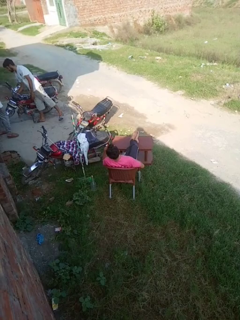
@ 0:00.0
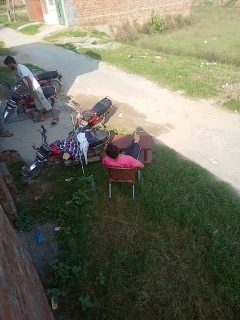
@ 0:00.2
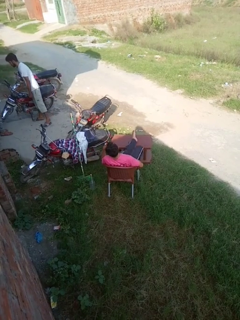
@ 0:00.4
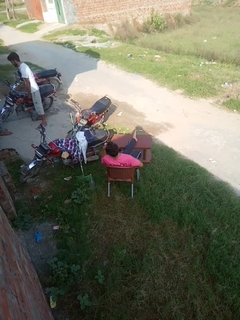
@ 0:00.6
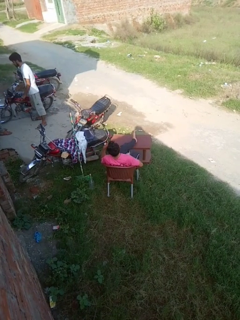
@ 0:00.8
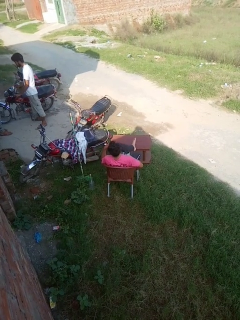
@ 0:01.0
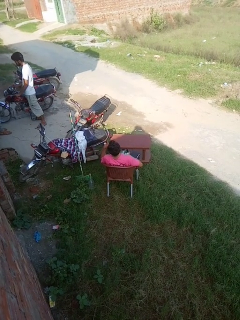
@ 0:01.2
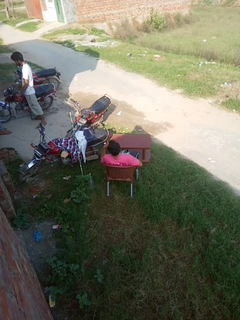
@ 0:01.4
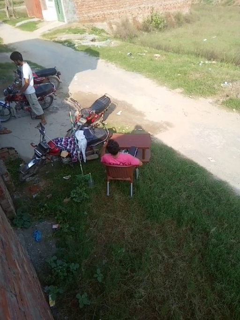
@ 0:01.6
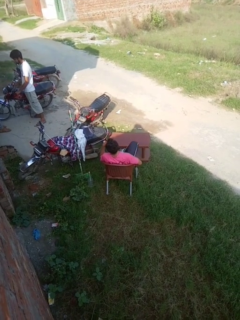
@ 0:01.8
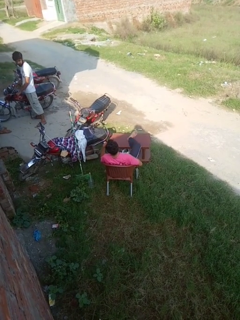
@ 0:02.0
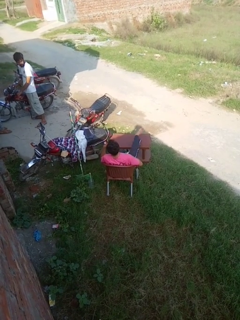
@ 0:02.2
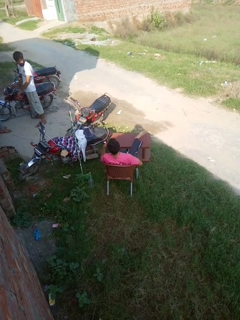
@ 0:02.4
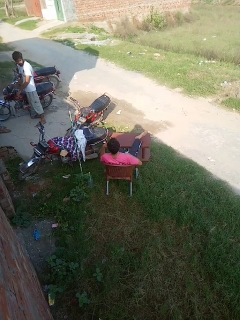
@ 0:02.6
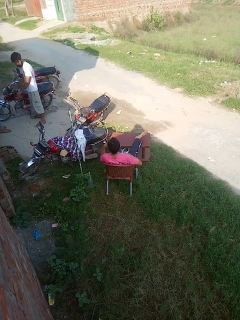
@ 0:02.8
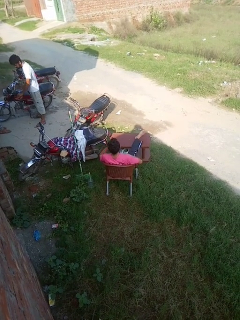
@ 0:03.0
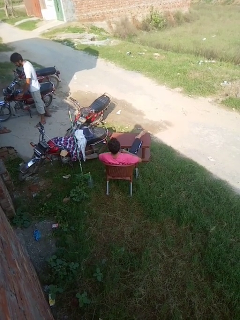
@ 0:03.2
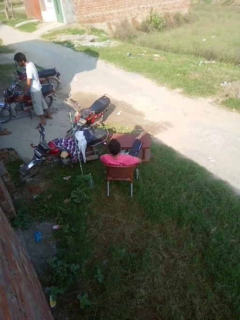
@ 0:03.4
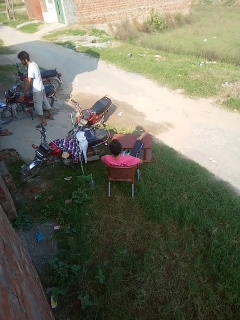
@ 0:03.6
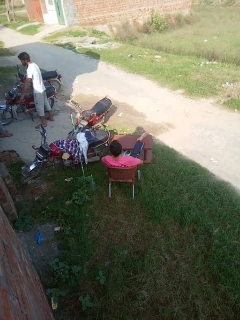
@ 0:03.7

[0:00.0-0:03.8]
person puts feet up

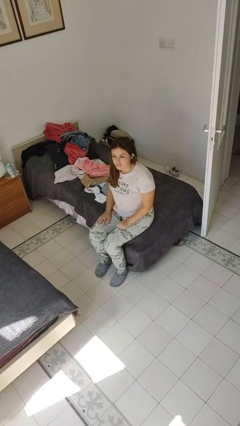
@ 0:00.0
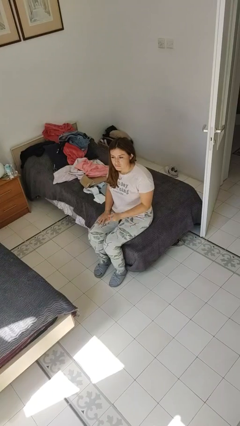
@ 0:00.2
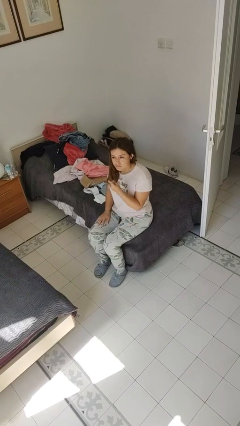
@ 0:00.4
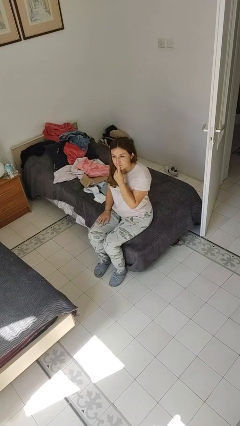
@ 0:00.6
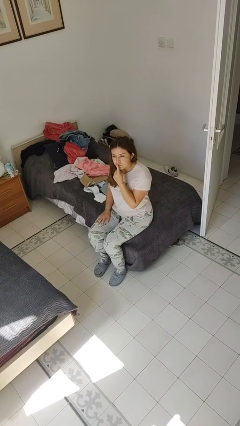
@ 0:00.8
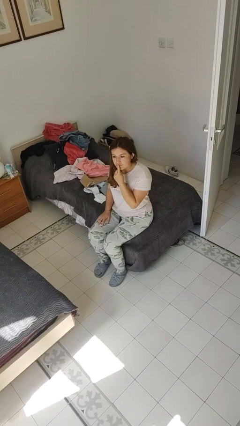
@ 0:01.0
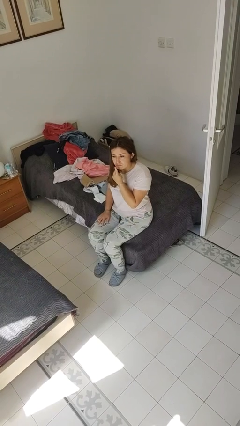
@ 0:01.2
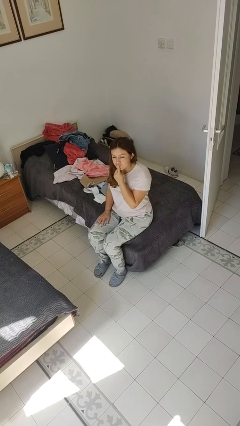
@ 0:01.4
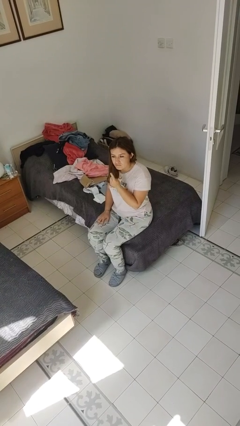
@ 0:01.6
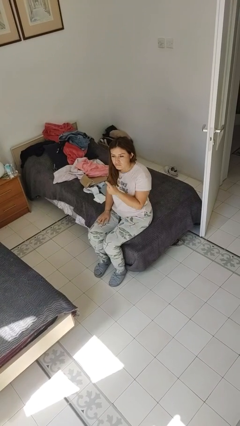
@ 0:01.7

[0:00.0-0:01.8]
person gestures be quiet

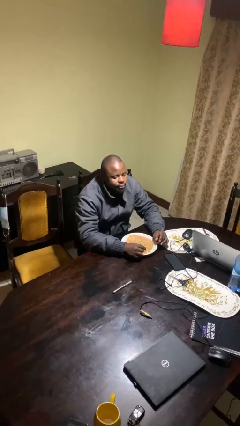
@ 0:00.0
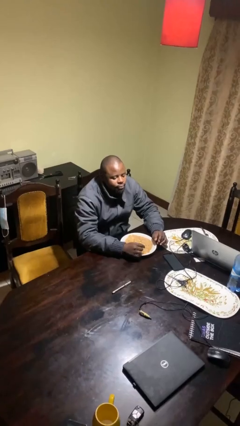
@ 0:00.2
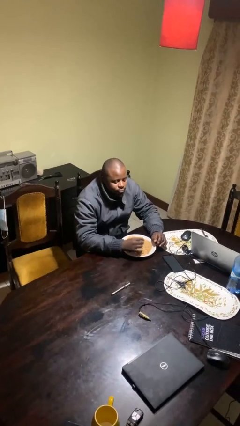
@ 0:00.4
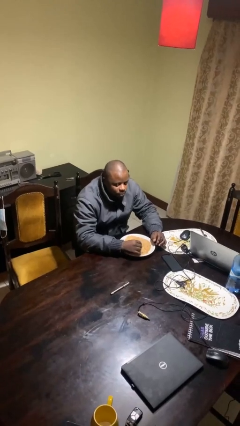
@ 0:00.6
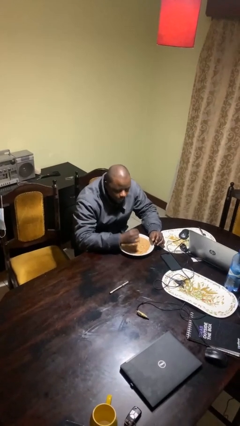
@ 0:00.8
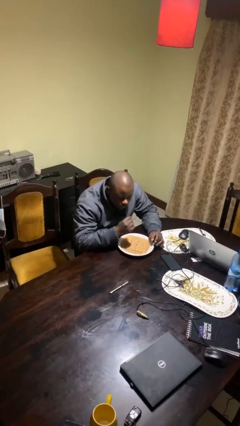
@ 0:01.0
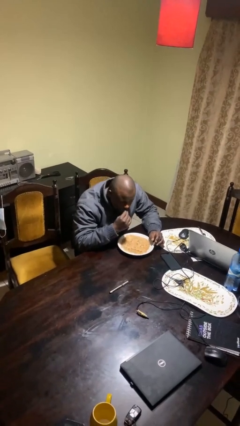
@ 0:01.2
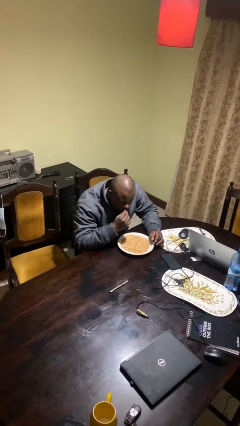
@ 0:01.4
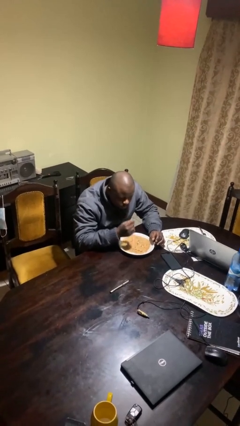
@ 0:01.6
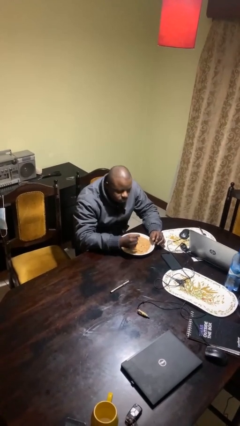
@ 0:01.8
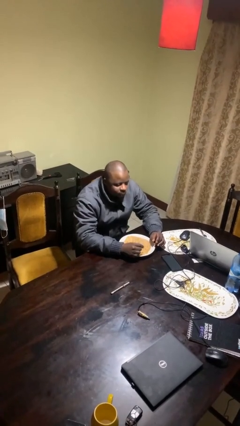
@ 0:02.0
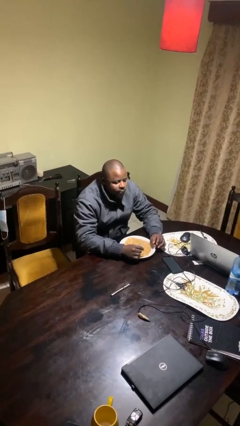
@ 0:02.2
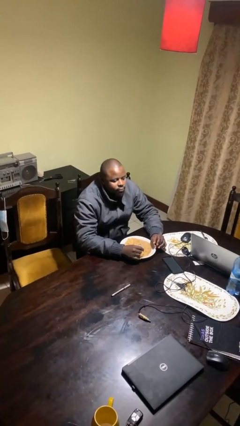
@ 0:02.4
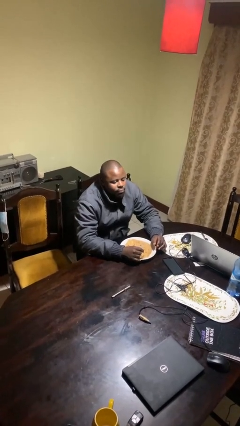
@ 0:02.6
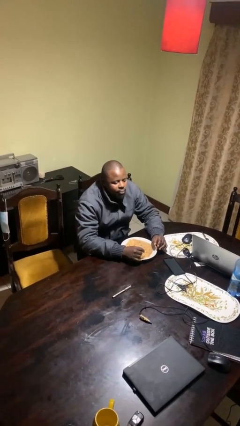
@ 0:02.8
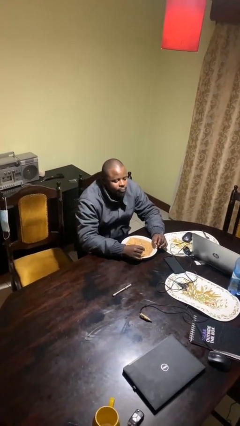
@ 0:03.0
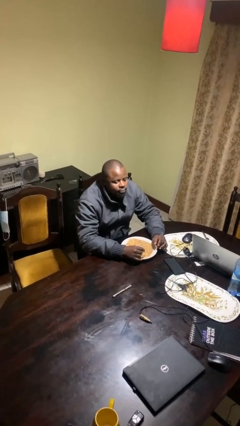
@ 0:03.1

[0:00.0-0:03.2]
person eats with hands

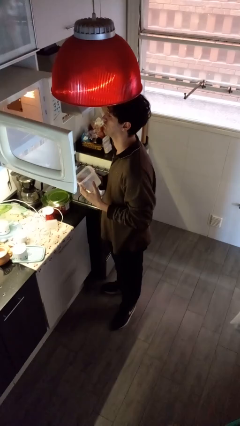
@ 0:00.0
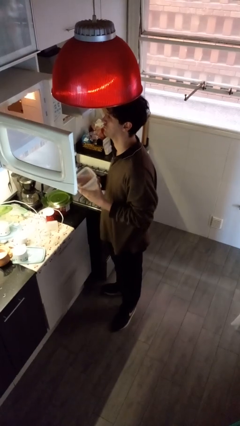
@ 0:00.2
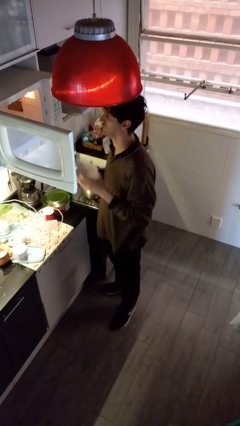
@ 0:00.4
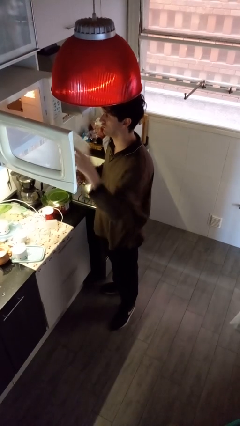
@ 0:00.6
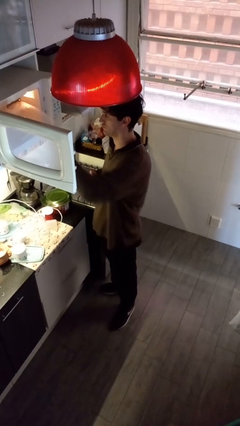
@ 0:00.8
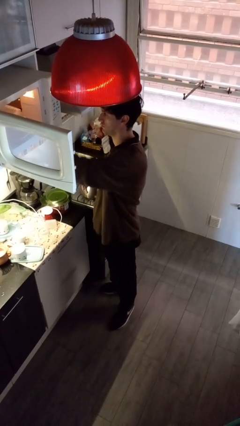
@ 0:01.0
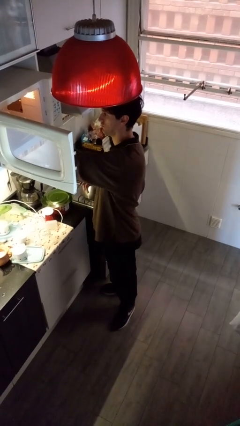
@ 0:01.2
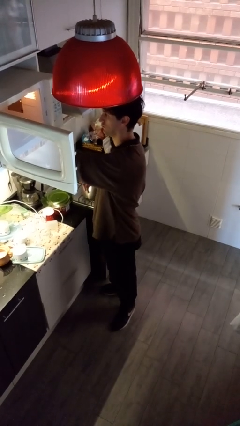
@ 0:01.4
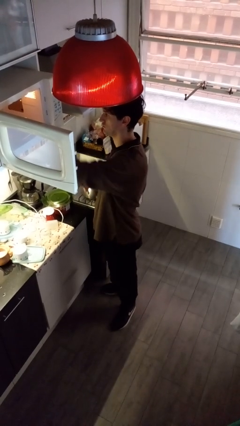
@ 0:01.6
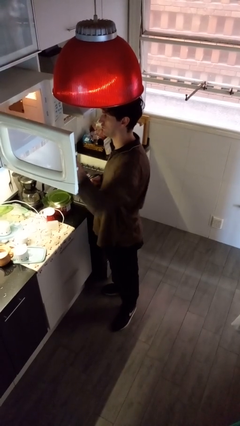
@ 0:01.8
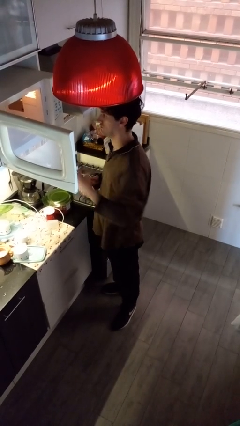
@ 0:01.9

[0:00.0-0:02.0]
person puts object into microwave

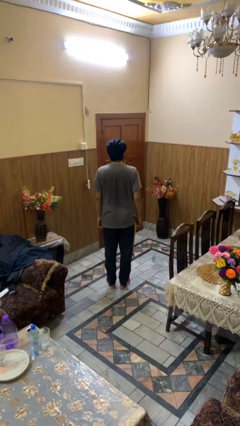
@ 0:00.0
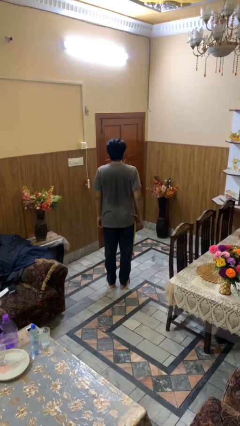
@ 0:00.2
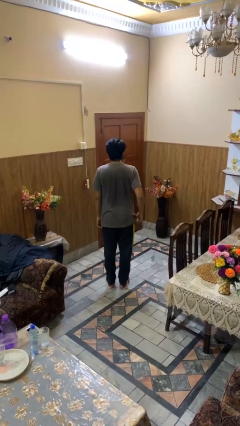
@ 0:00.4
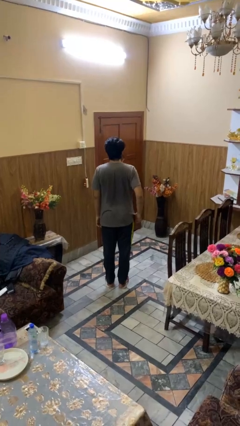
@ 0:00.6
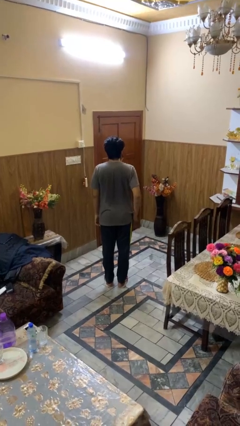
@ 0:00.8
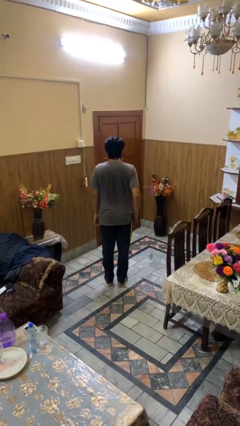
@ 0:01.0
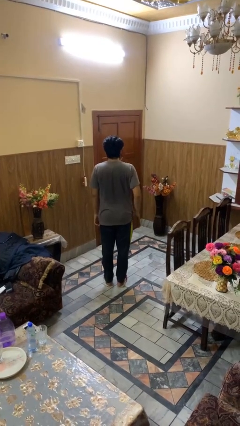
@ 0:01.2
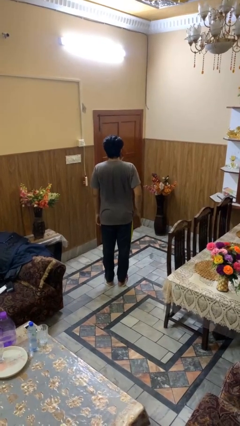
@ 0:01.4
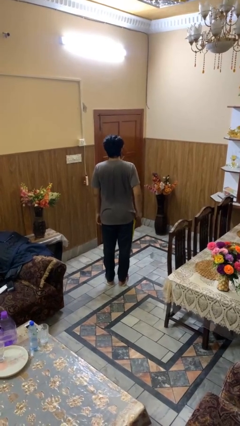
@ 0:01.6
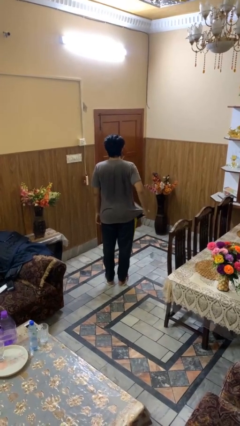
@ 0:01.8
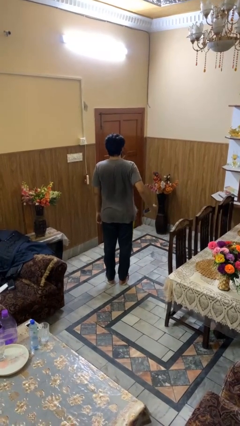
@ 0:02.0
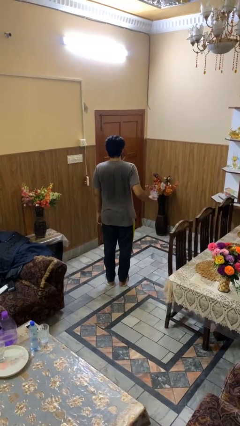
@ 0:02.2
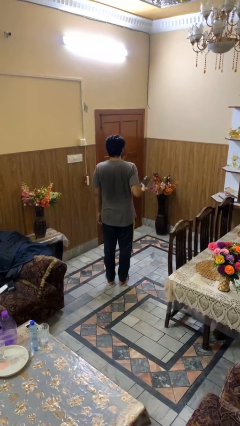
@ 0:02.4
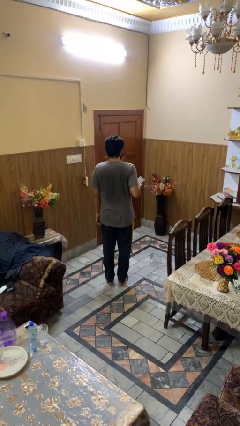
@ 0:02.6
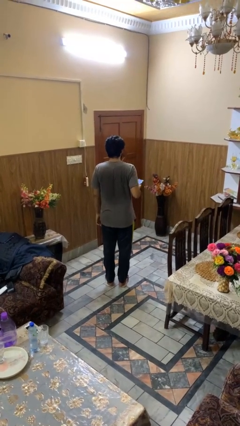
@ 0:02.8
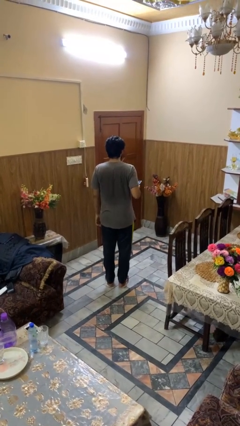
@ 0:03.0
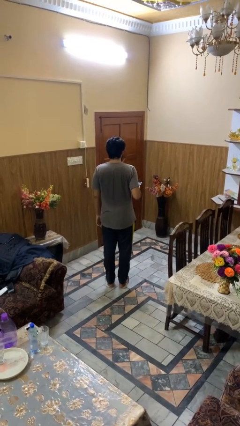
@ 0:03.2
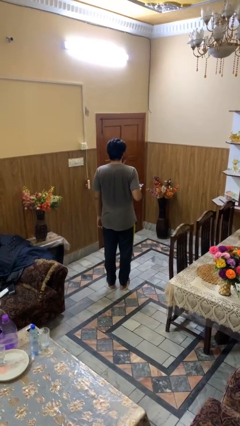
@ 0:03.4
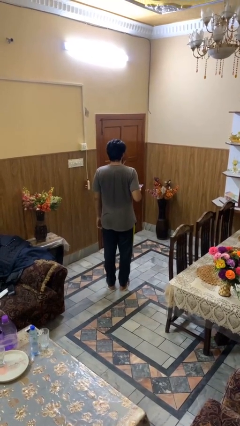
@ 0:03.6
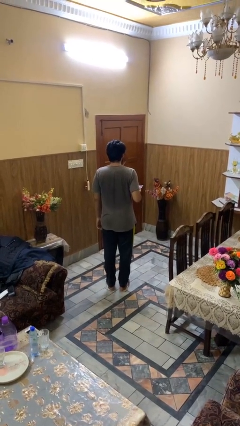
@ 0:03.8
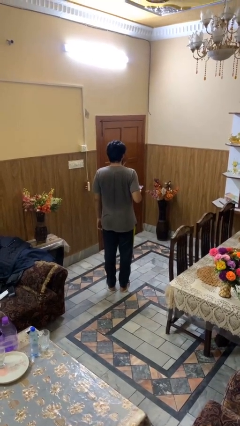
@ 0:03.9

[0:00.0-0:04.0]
person takes phone from pocket

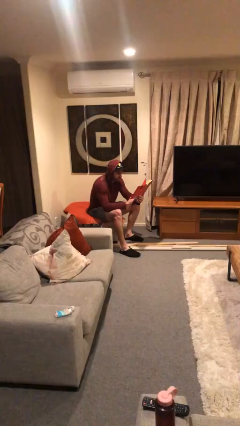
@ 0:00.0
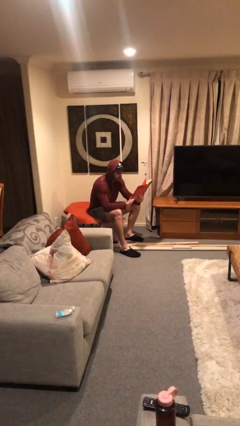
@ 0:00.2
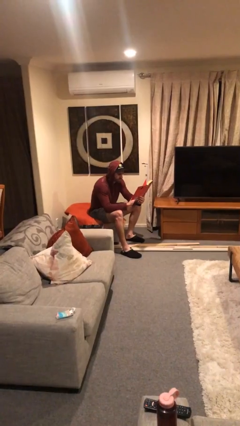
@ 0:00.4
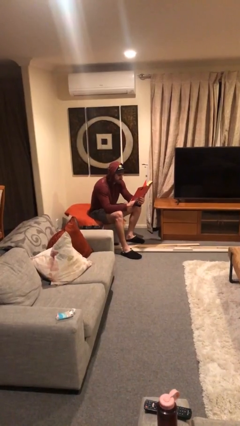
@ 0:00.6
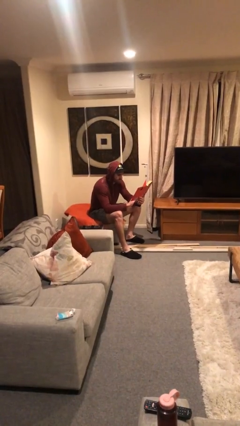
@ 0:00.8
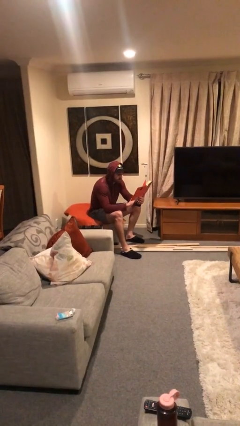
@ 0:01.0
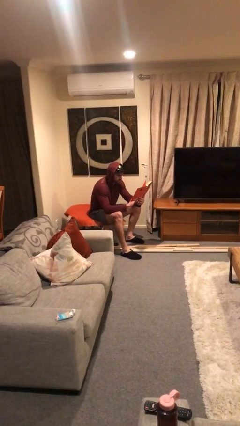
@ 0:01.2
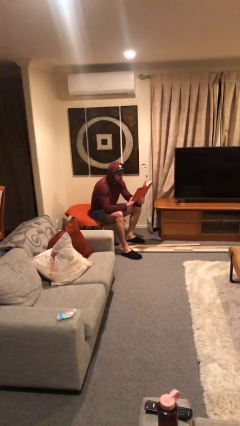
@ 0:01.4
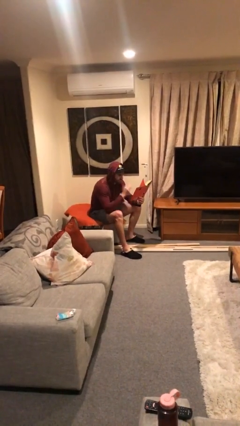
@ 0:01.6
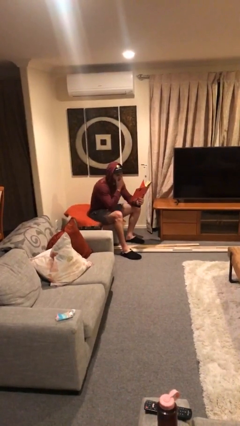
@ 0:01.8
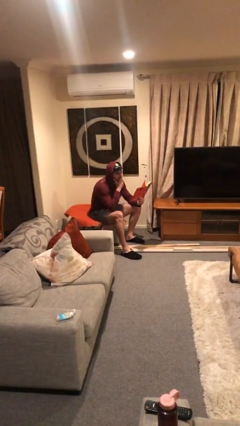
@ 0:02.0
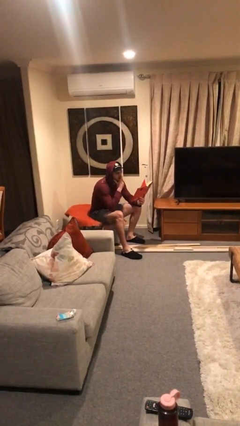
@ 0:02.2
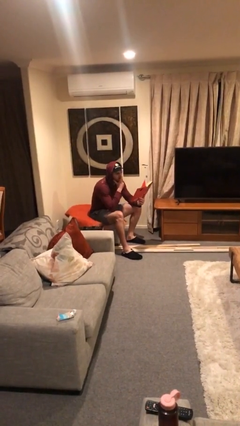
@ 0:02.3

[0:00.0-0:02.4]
person reads document

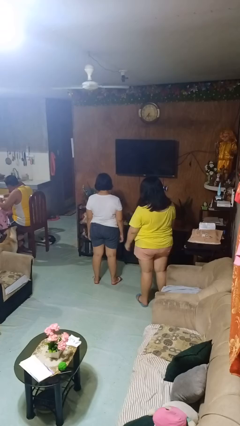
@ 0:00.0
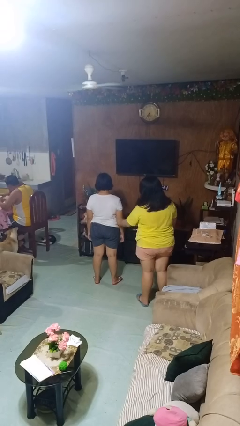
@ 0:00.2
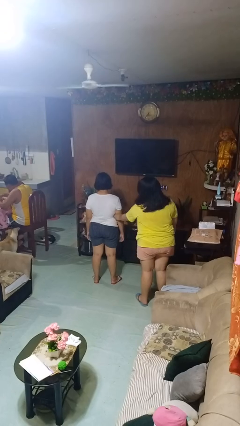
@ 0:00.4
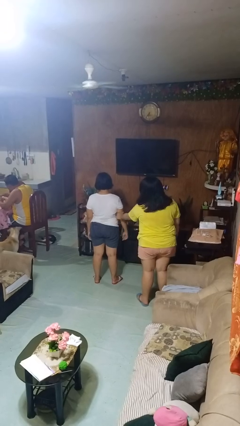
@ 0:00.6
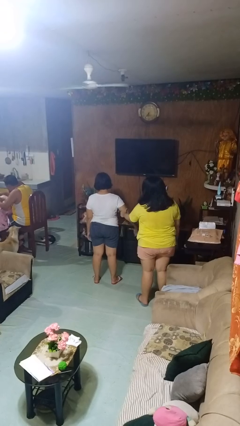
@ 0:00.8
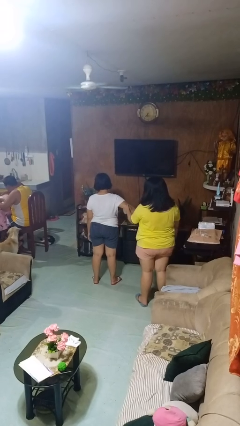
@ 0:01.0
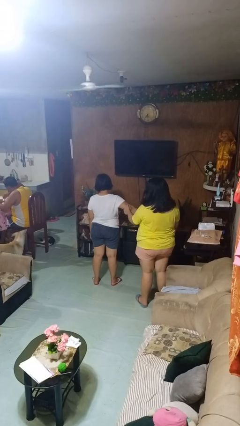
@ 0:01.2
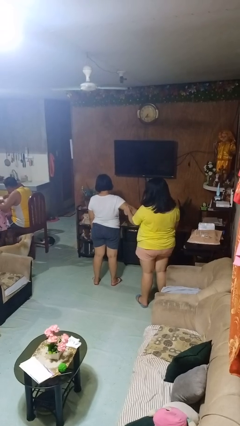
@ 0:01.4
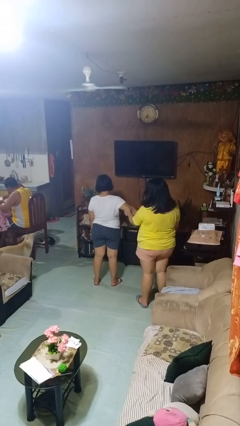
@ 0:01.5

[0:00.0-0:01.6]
person grabs person by bicep
